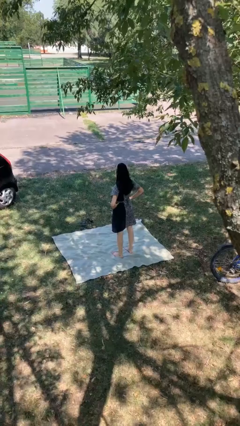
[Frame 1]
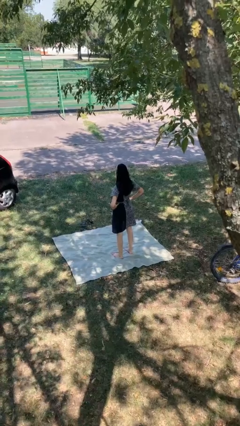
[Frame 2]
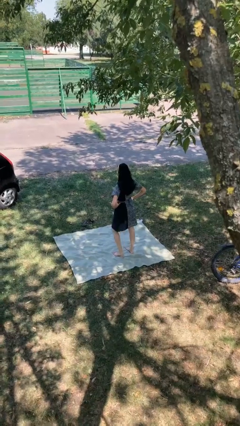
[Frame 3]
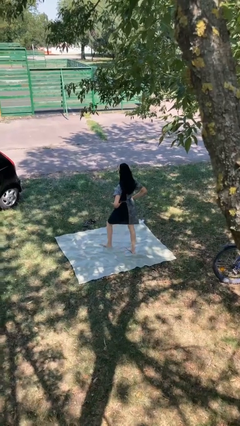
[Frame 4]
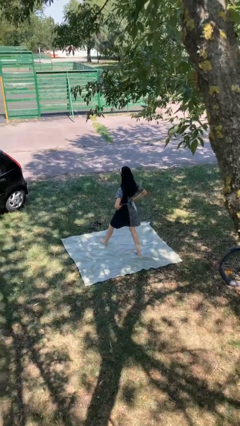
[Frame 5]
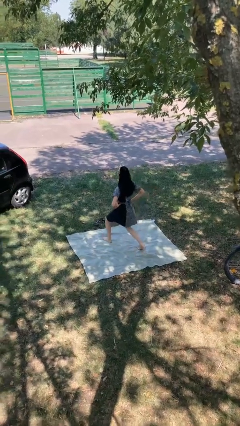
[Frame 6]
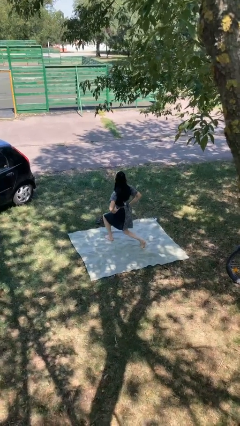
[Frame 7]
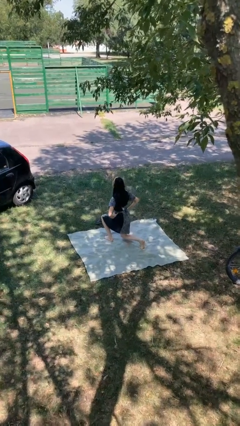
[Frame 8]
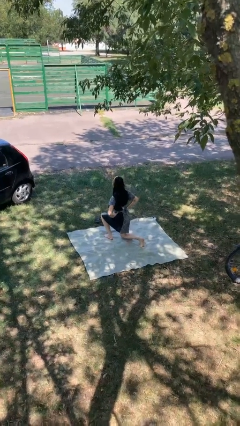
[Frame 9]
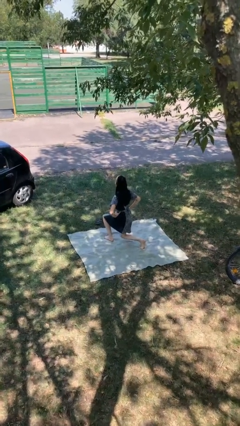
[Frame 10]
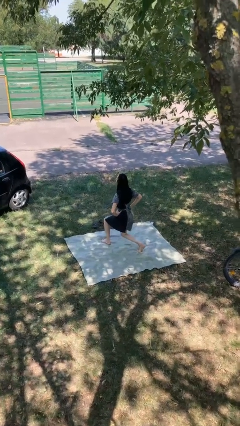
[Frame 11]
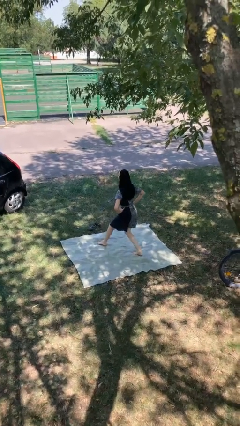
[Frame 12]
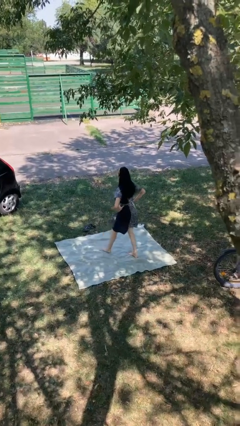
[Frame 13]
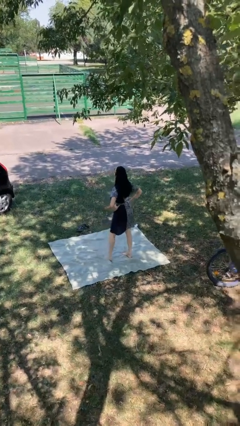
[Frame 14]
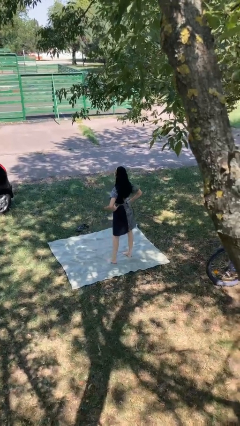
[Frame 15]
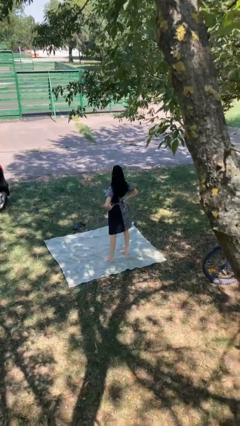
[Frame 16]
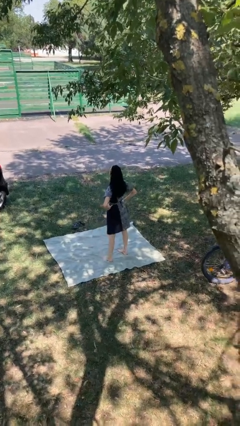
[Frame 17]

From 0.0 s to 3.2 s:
person exercises with lunges

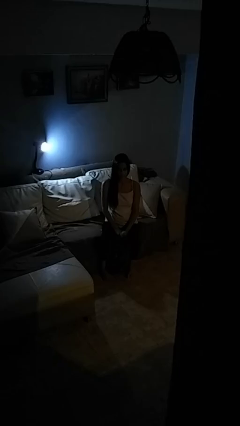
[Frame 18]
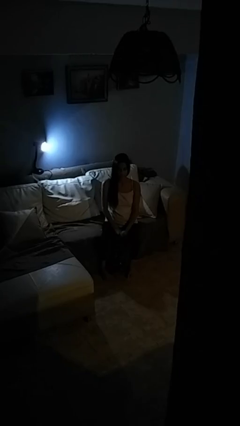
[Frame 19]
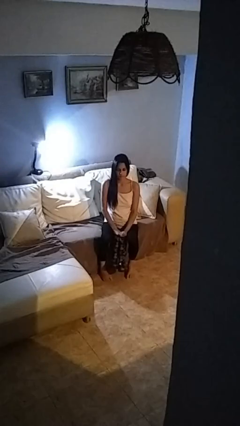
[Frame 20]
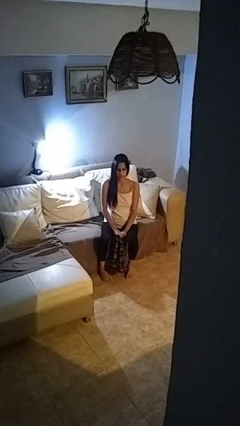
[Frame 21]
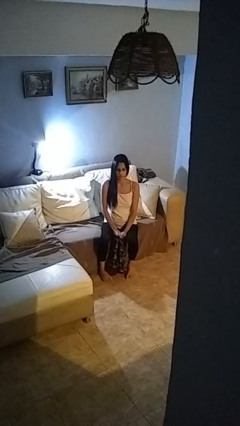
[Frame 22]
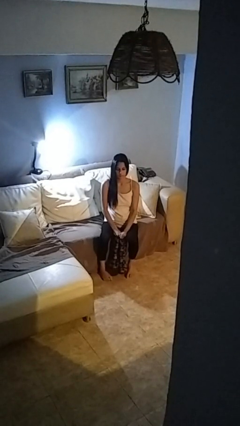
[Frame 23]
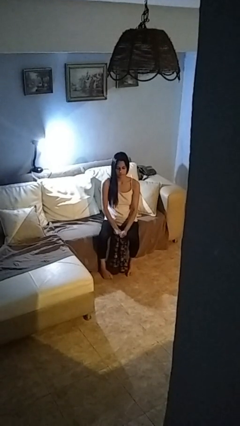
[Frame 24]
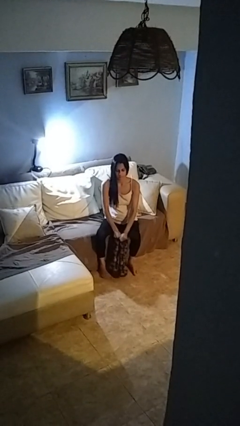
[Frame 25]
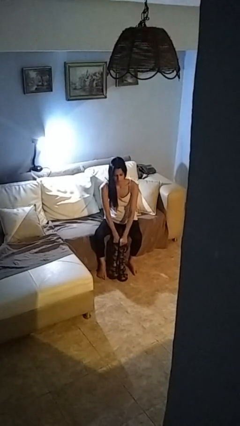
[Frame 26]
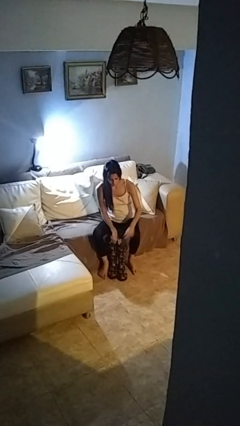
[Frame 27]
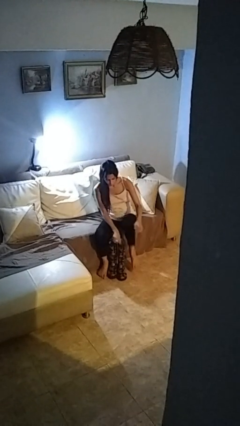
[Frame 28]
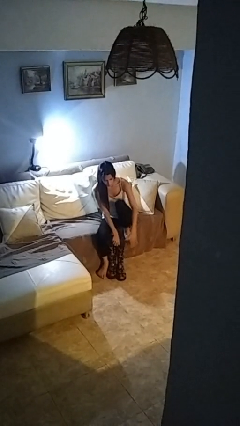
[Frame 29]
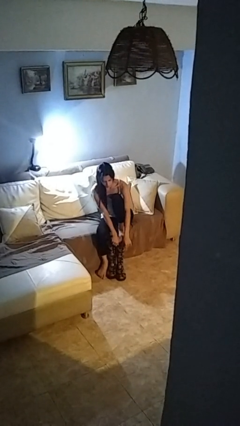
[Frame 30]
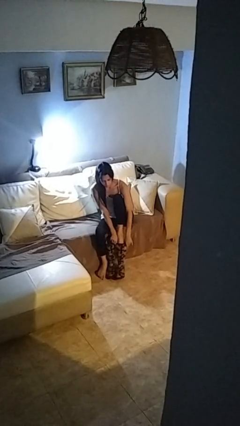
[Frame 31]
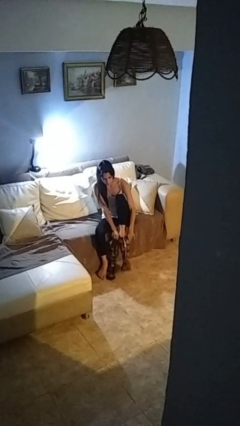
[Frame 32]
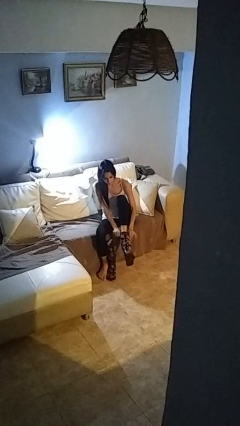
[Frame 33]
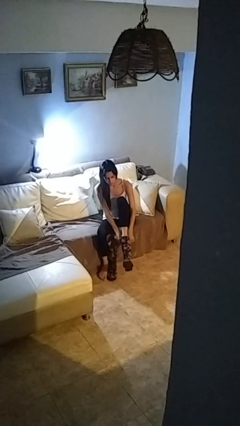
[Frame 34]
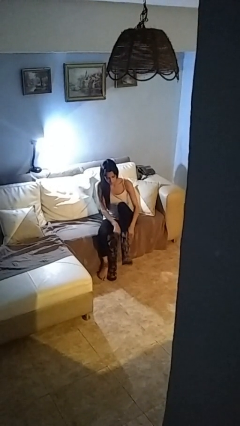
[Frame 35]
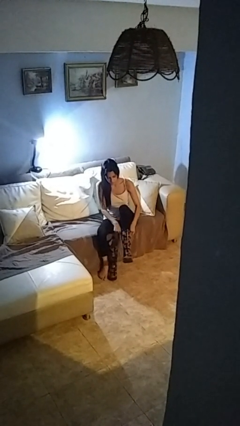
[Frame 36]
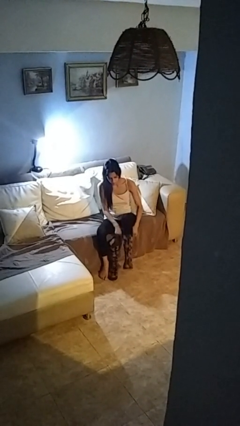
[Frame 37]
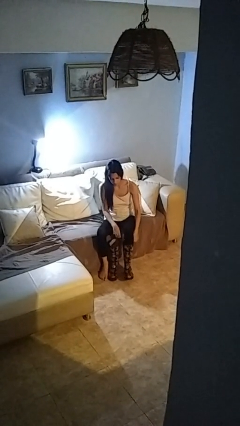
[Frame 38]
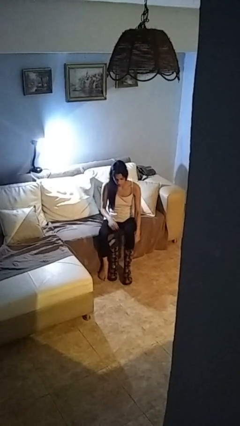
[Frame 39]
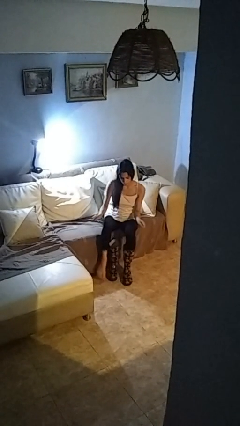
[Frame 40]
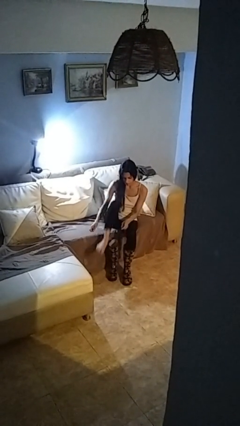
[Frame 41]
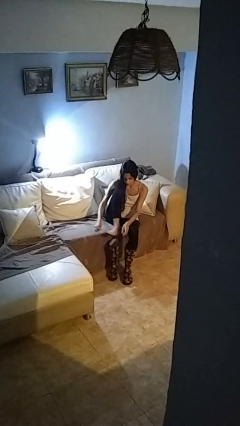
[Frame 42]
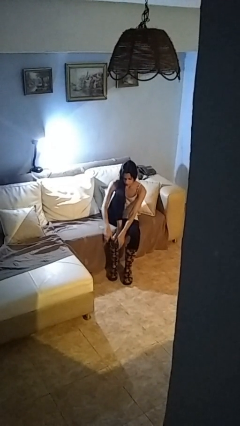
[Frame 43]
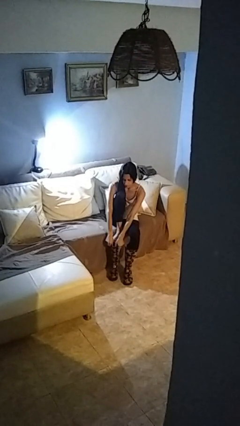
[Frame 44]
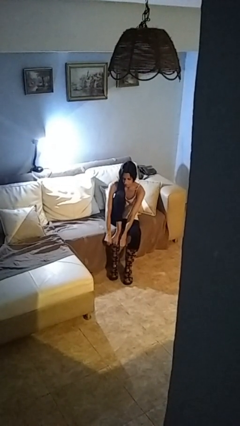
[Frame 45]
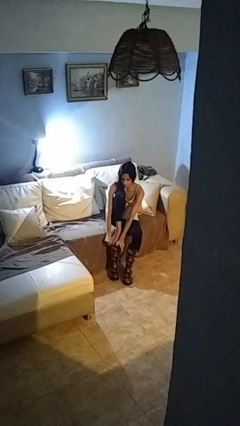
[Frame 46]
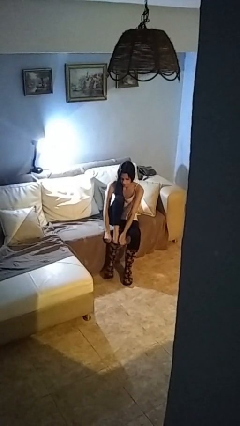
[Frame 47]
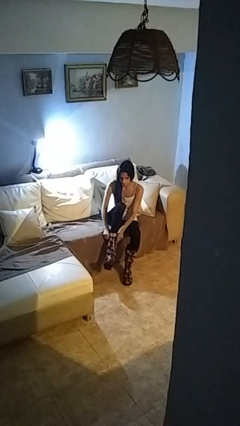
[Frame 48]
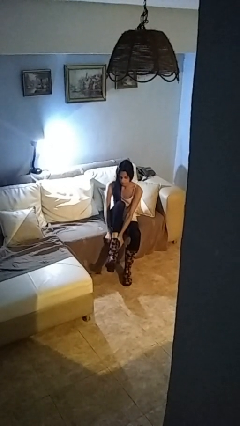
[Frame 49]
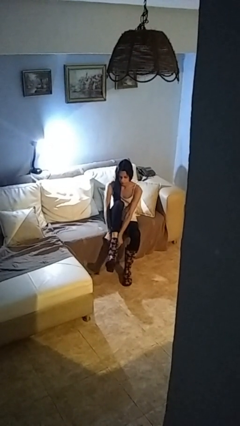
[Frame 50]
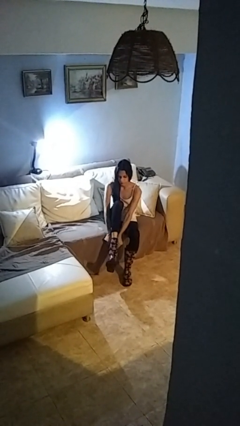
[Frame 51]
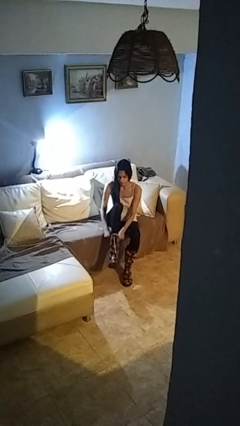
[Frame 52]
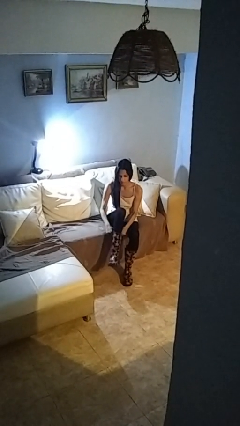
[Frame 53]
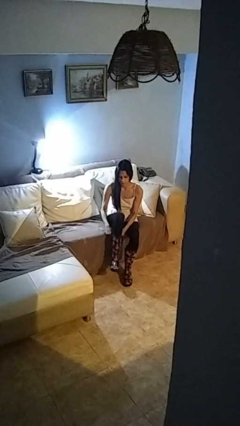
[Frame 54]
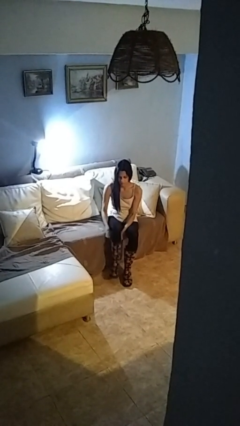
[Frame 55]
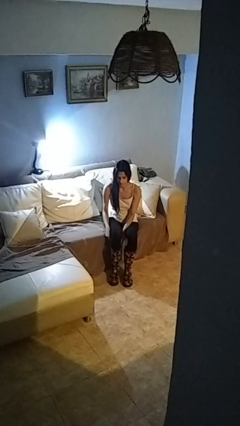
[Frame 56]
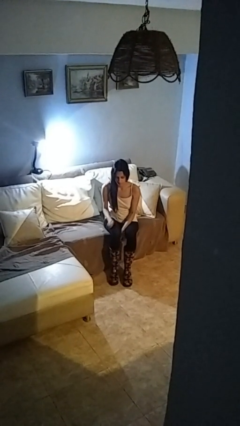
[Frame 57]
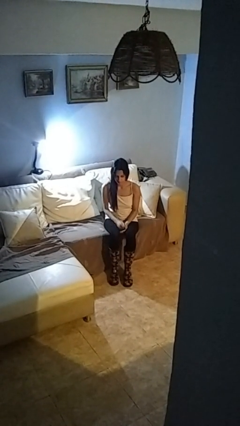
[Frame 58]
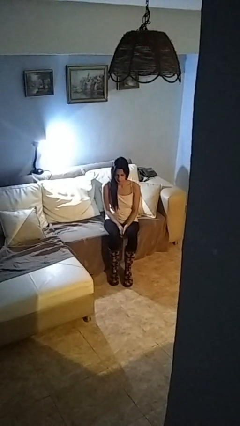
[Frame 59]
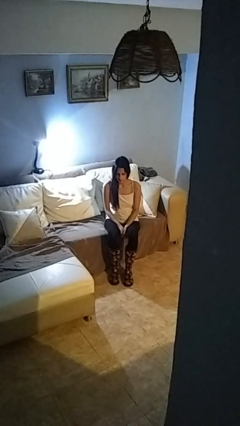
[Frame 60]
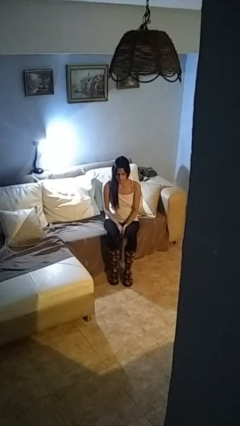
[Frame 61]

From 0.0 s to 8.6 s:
person puts on boots

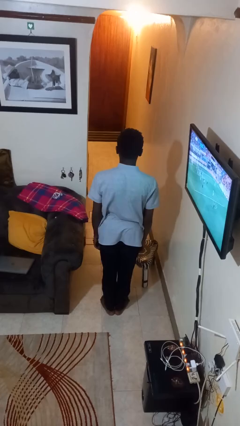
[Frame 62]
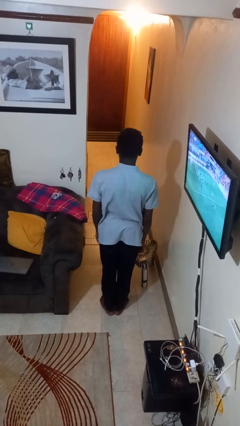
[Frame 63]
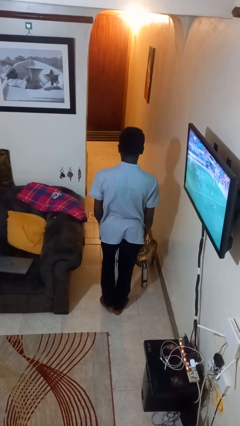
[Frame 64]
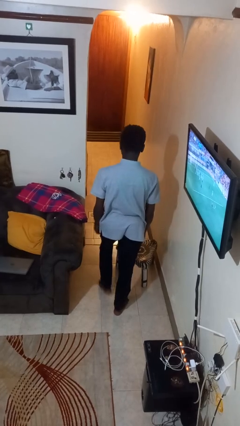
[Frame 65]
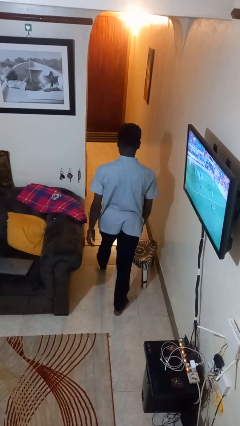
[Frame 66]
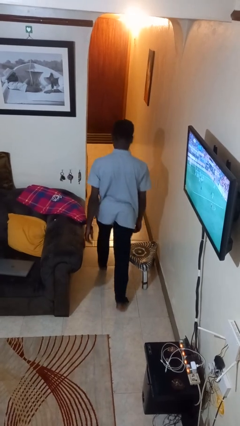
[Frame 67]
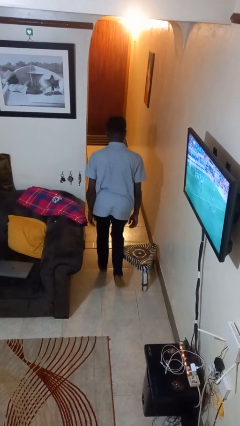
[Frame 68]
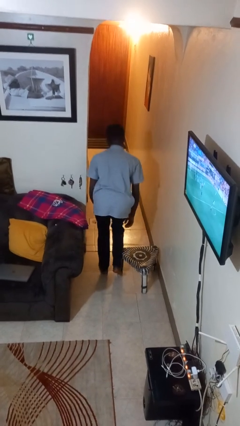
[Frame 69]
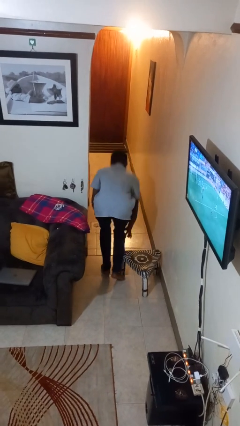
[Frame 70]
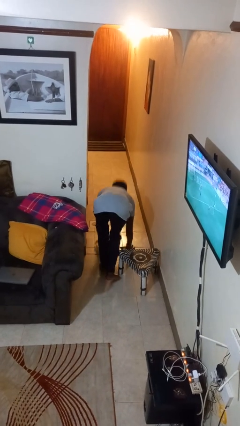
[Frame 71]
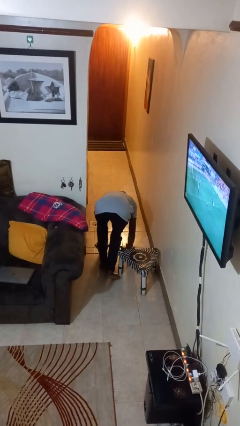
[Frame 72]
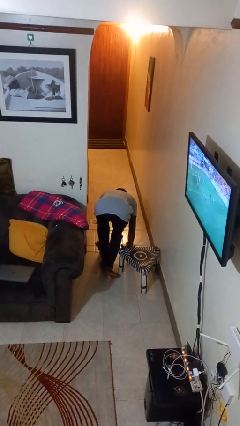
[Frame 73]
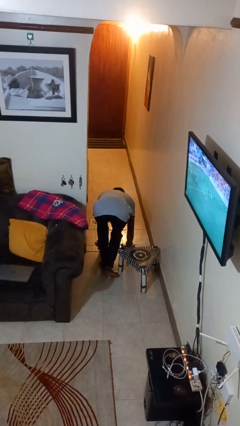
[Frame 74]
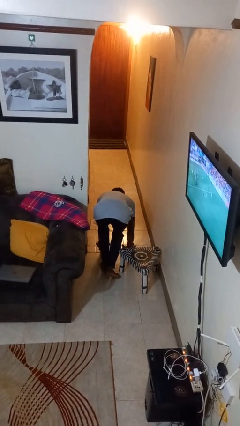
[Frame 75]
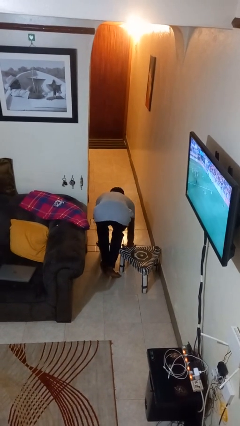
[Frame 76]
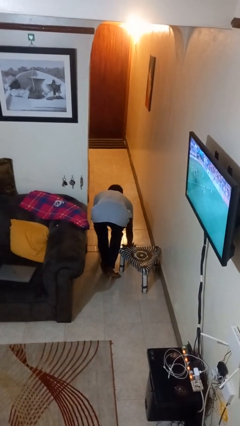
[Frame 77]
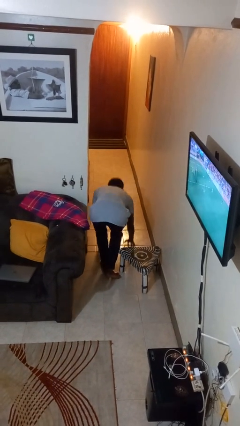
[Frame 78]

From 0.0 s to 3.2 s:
person trips on object on floor

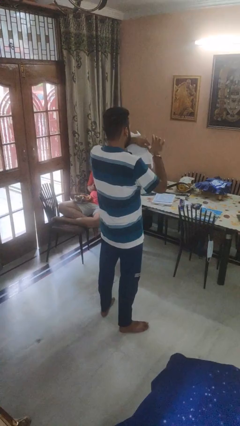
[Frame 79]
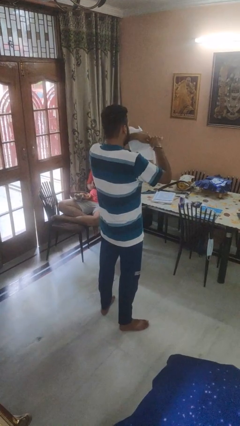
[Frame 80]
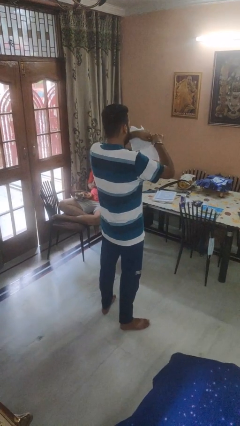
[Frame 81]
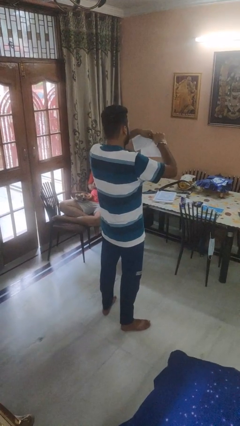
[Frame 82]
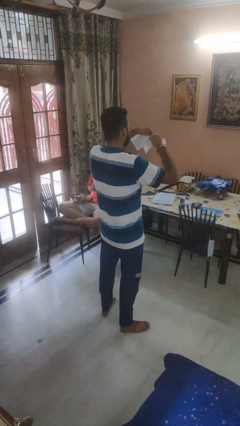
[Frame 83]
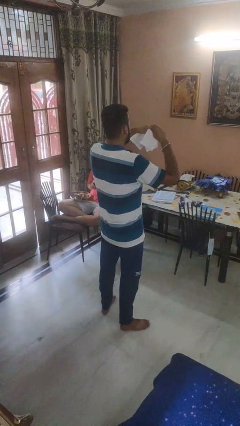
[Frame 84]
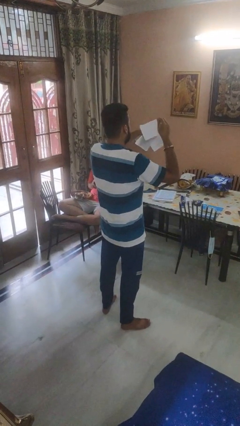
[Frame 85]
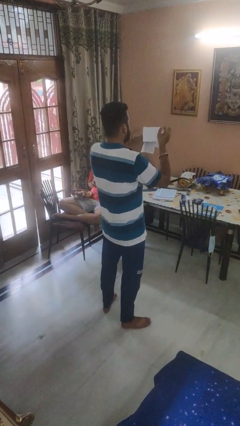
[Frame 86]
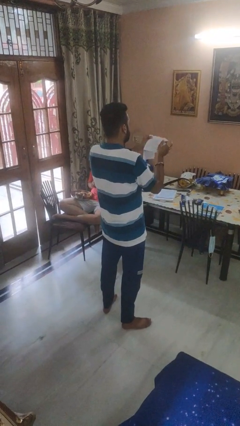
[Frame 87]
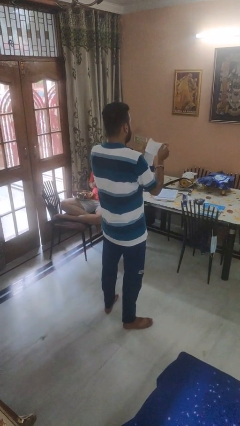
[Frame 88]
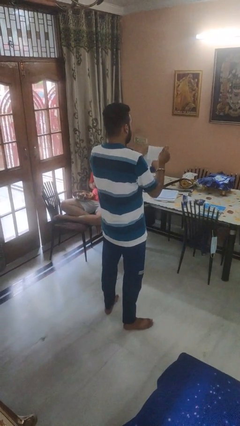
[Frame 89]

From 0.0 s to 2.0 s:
person tears paper

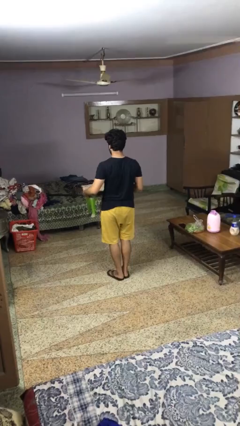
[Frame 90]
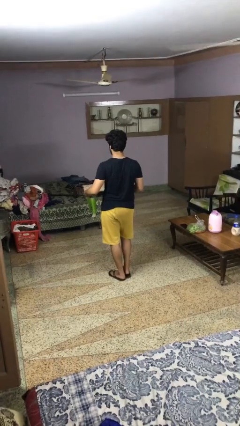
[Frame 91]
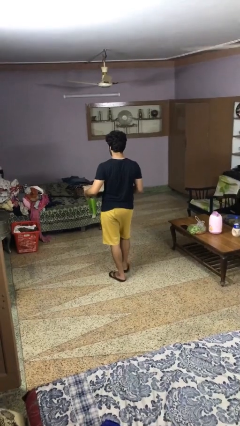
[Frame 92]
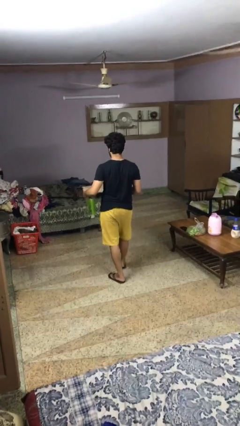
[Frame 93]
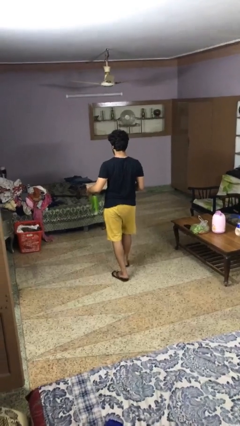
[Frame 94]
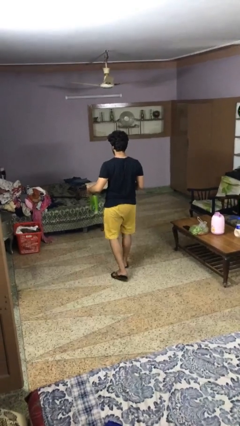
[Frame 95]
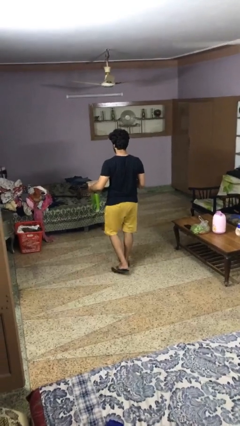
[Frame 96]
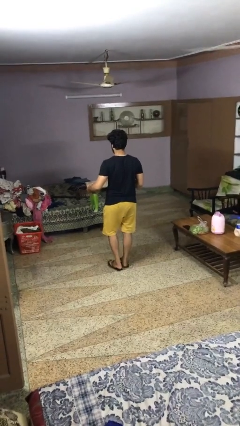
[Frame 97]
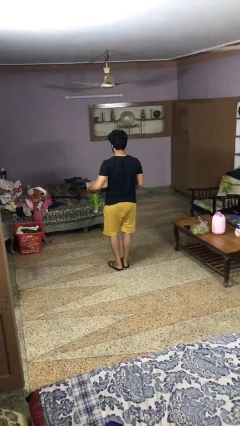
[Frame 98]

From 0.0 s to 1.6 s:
person carries furniture
